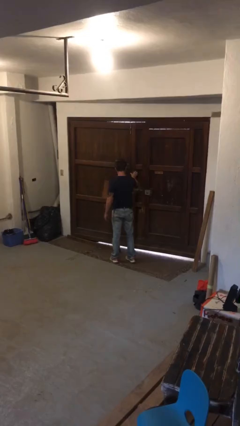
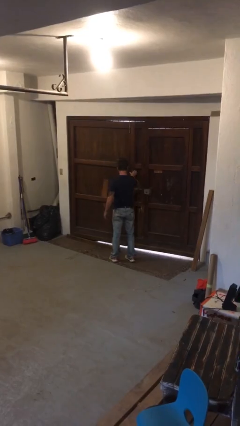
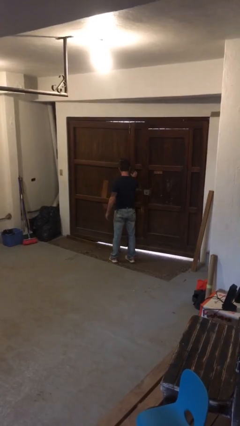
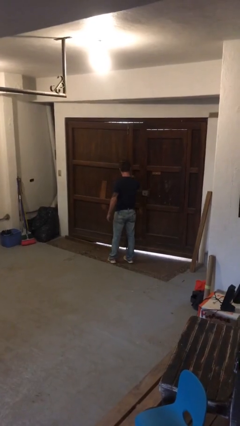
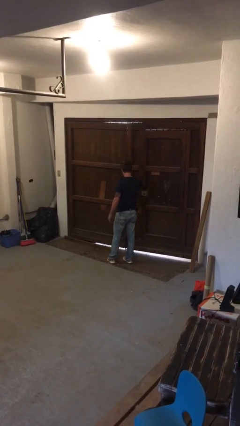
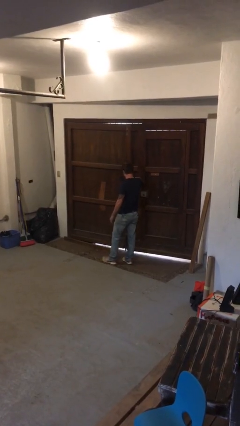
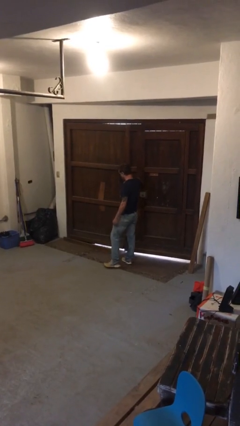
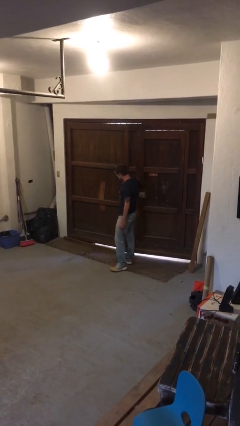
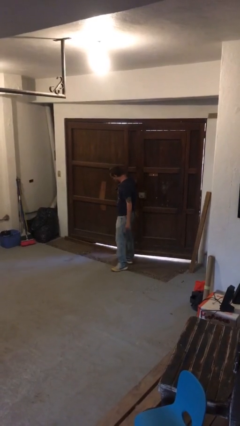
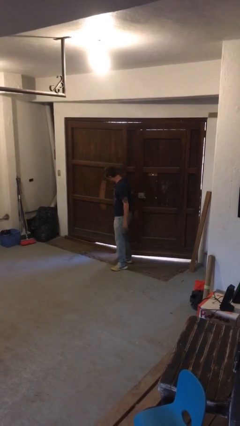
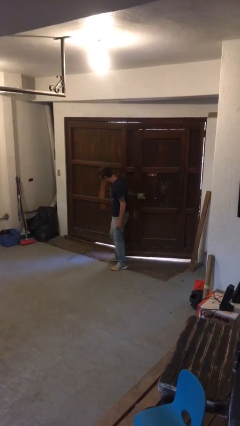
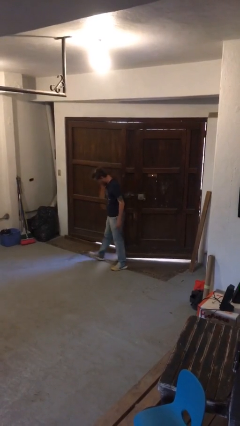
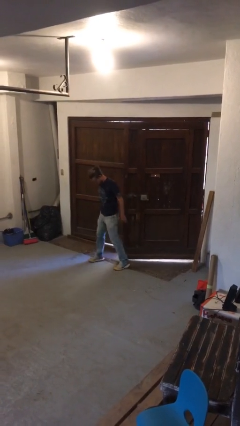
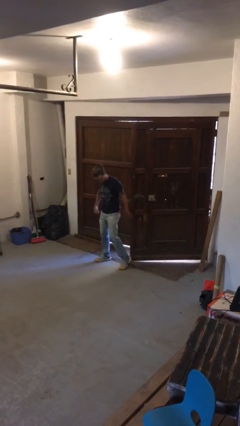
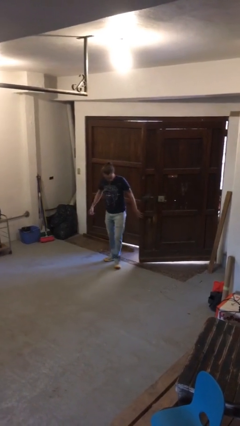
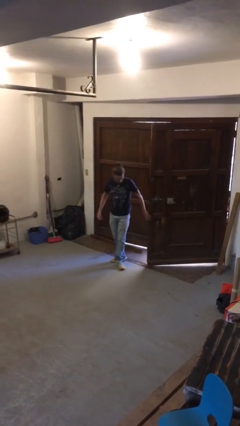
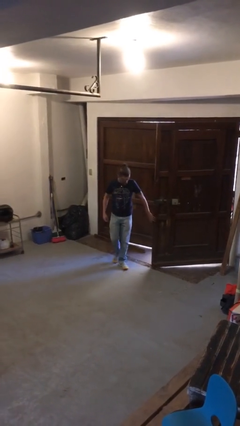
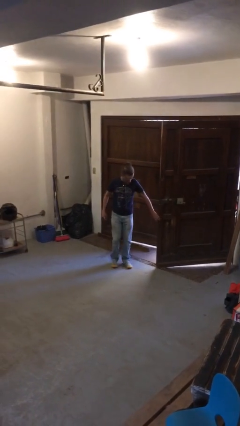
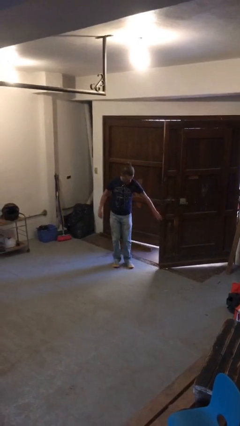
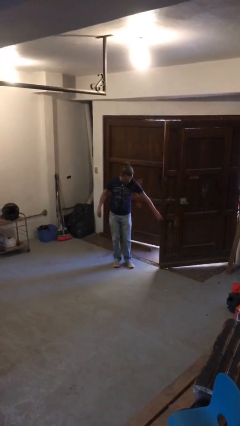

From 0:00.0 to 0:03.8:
person opens gate

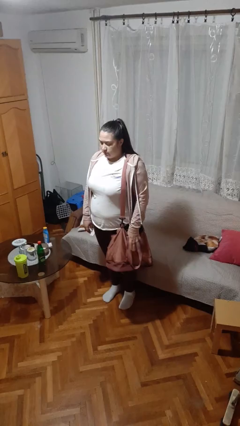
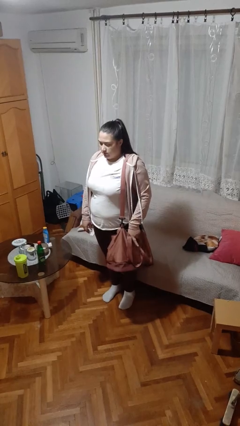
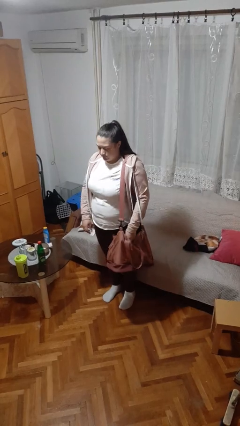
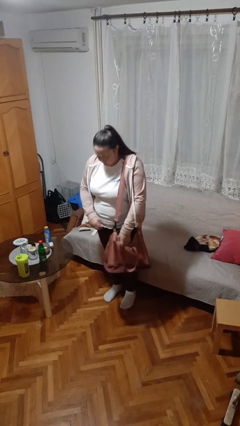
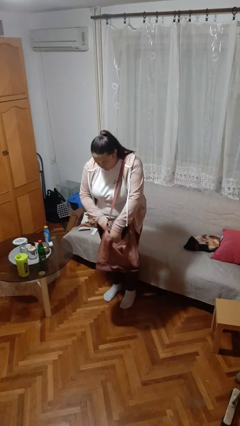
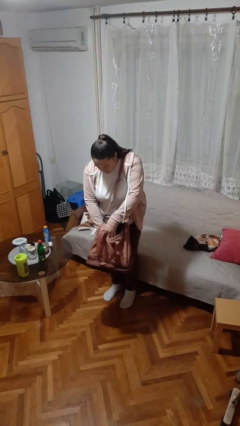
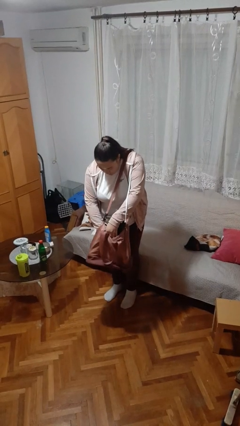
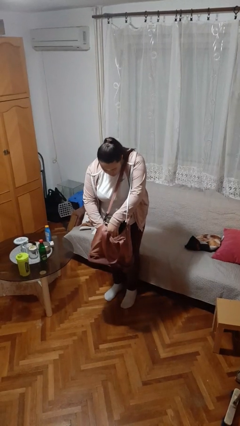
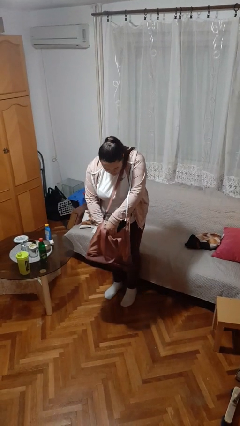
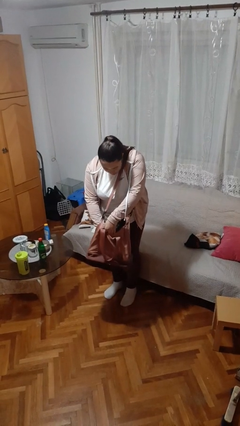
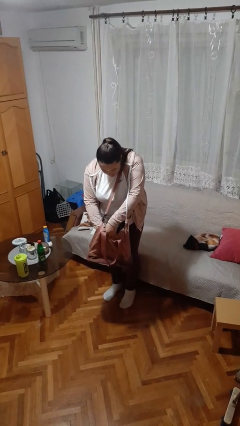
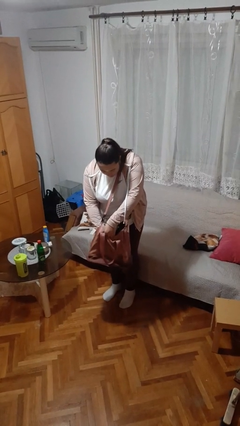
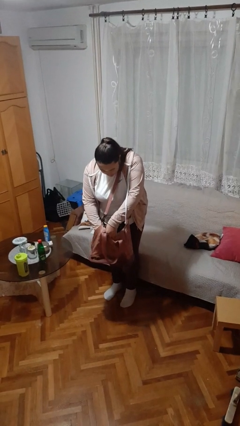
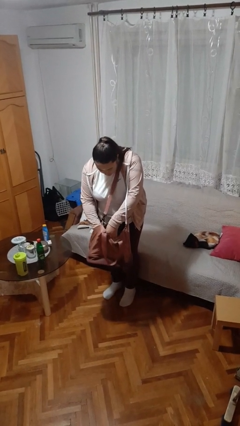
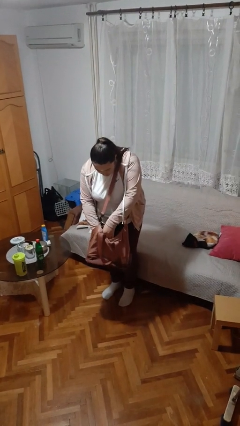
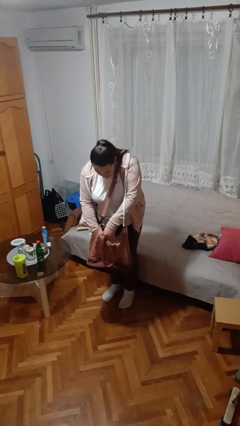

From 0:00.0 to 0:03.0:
person searches in purse

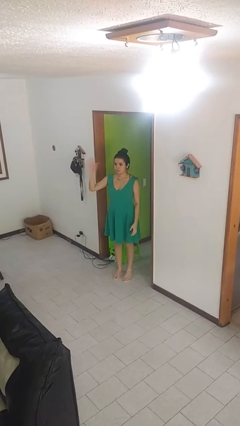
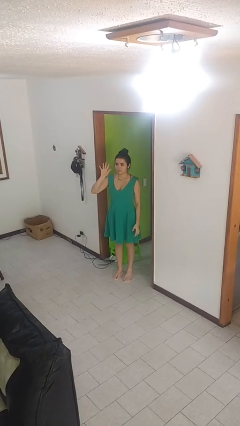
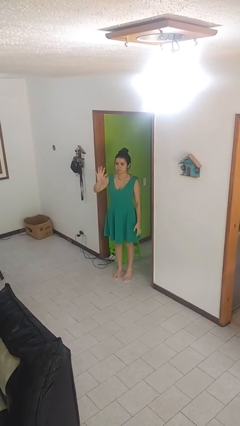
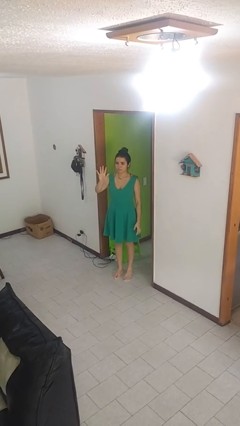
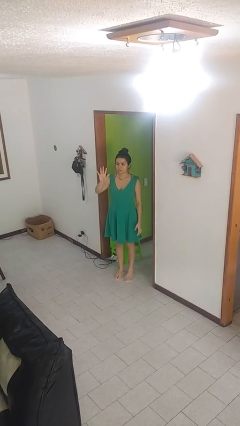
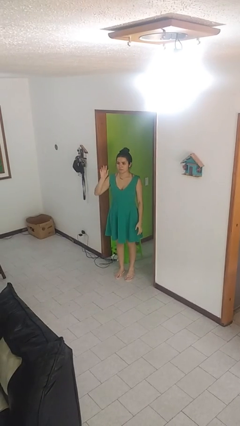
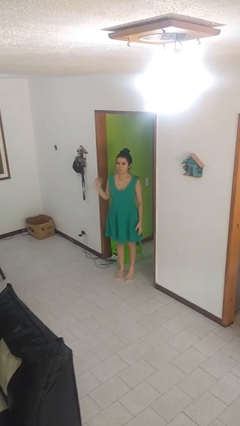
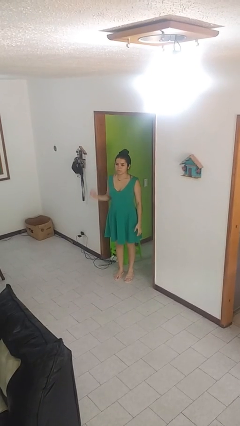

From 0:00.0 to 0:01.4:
person gestures number five

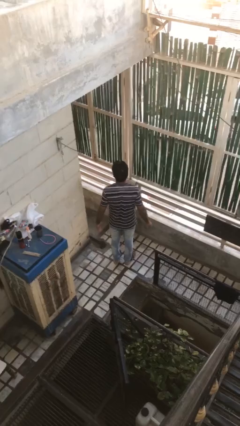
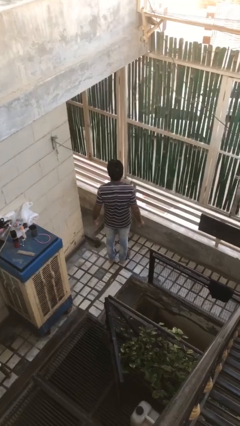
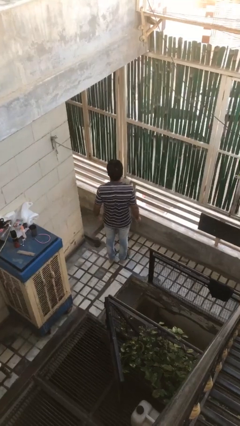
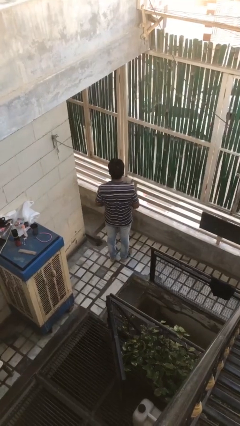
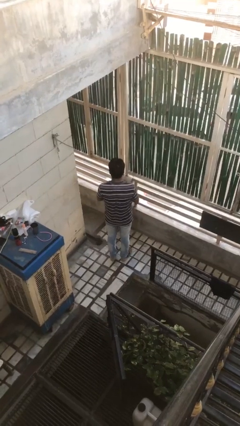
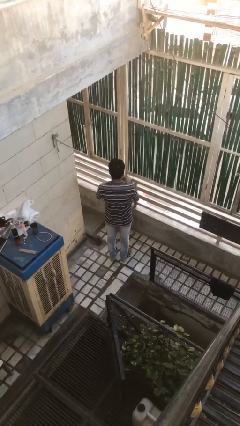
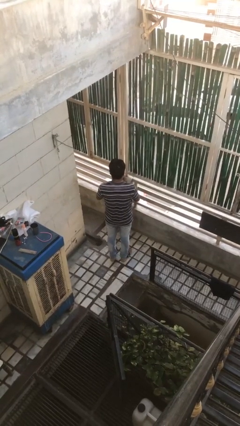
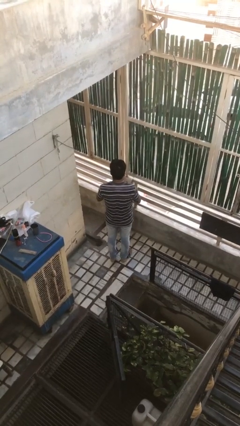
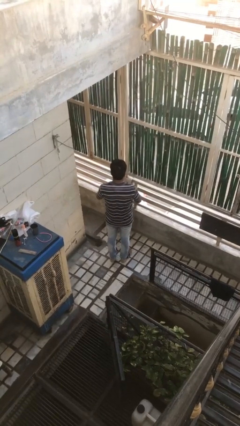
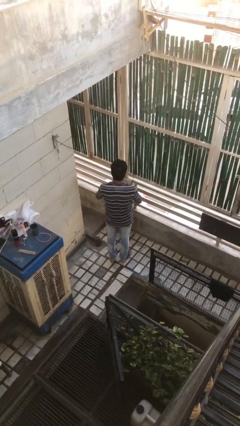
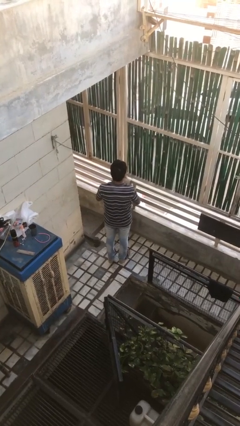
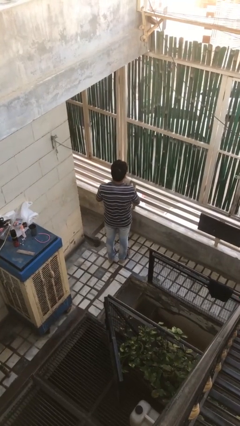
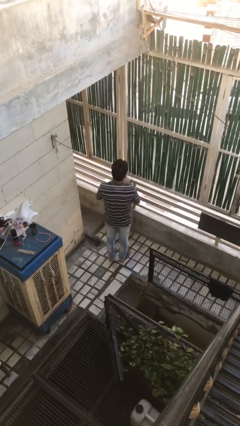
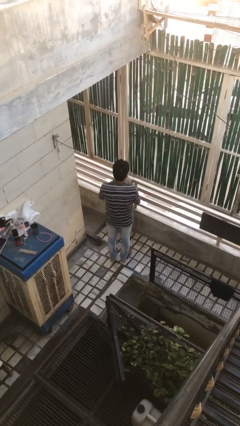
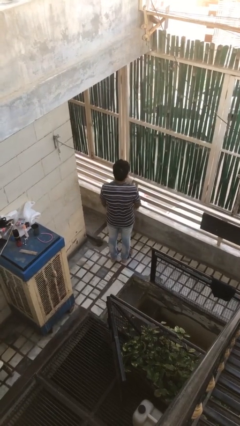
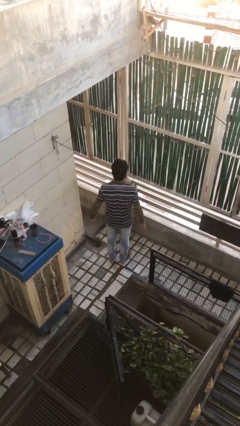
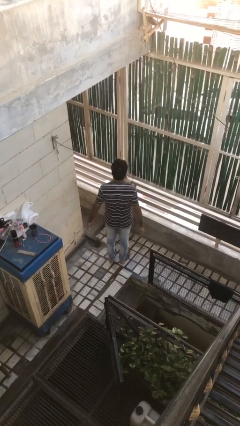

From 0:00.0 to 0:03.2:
person puts on ring

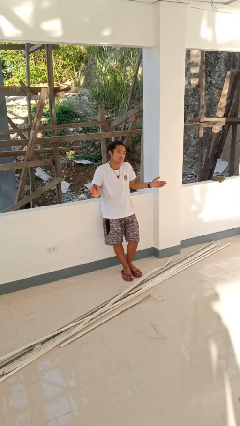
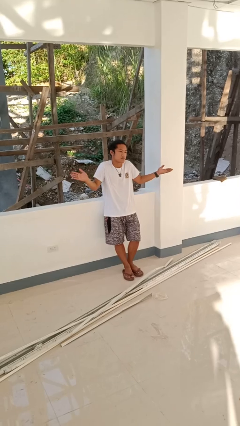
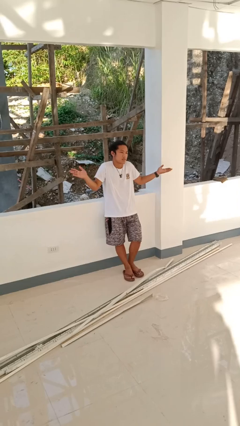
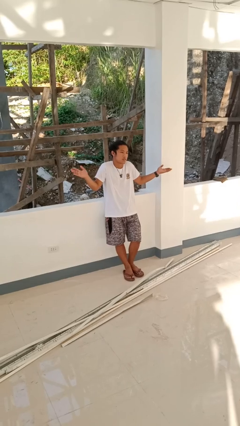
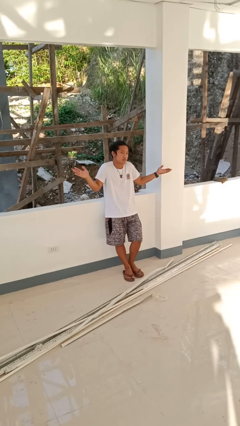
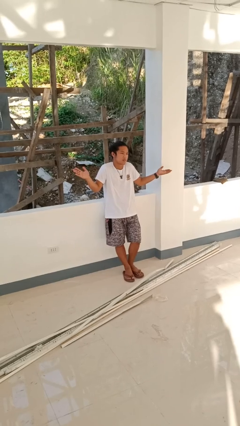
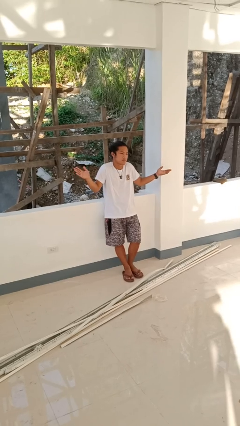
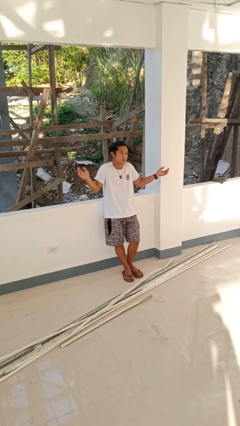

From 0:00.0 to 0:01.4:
person shrugs

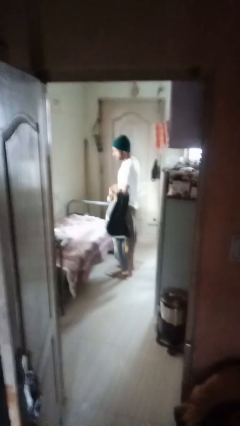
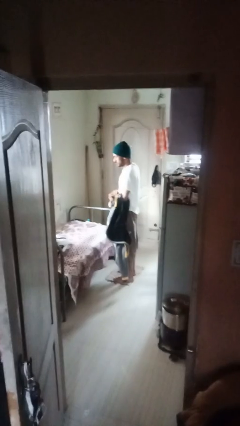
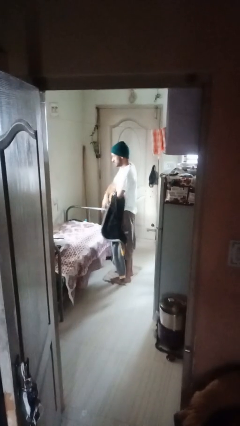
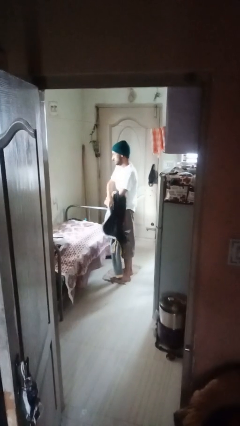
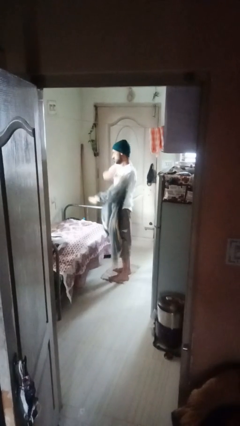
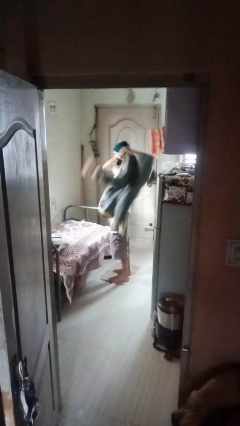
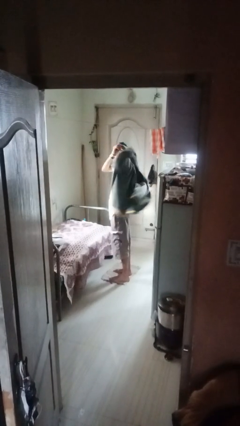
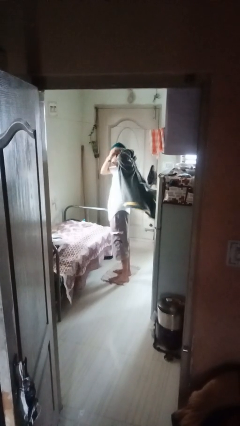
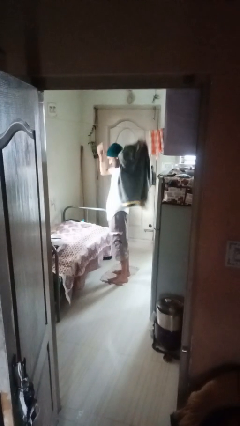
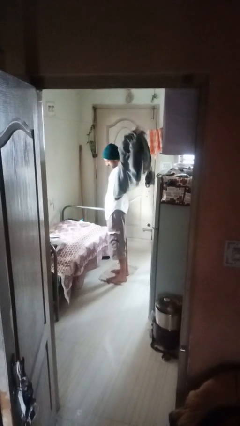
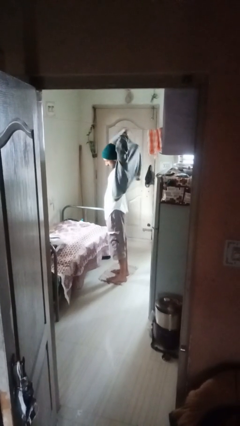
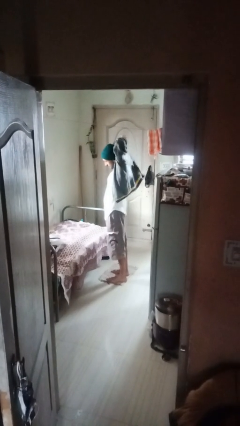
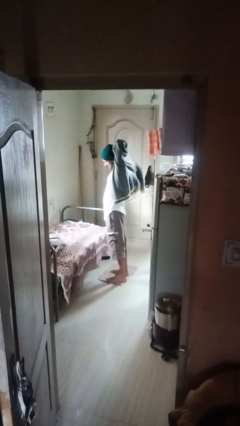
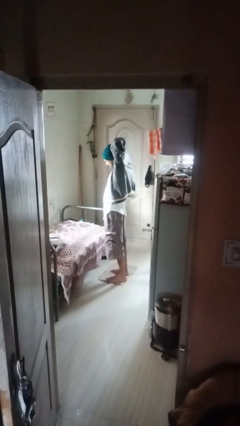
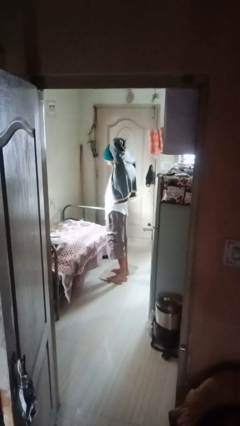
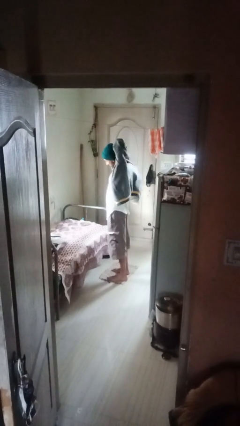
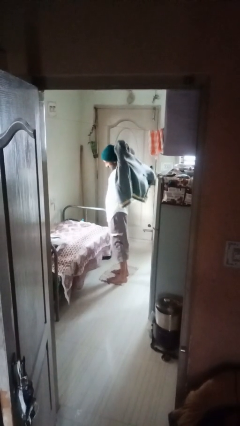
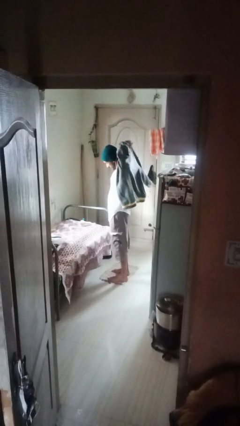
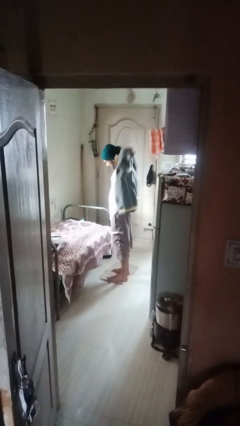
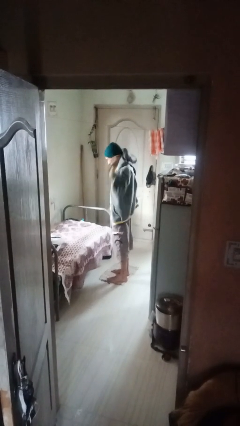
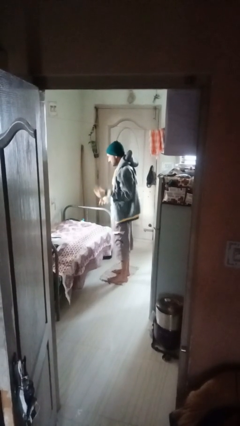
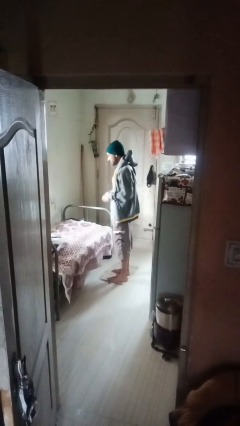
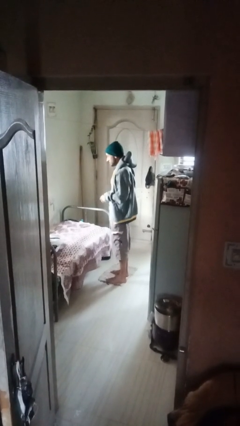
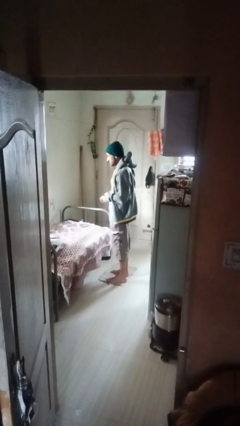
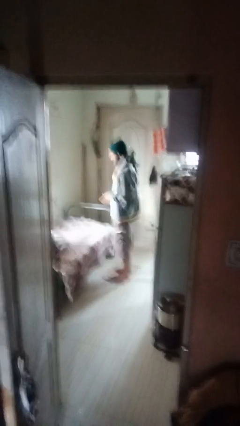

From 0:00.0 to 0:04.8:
person puts on shirt
